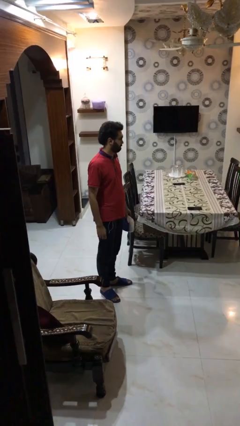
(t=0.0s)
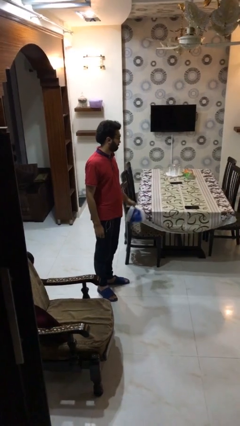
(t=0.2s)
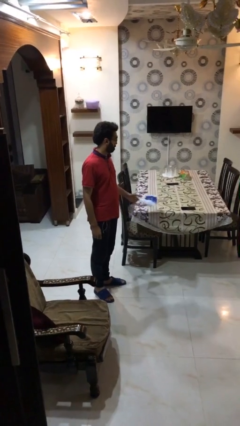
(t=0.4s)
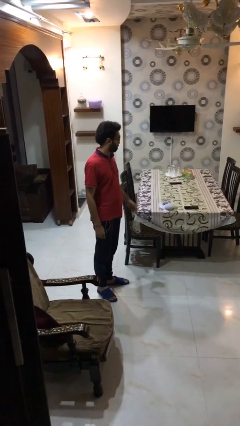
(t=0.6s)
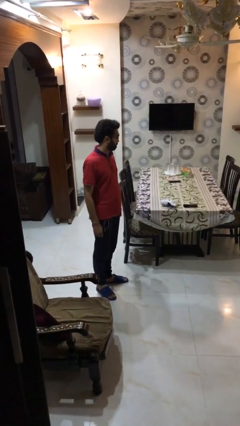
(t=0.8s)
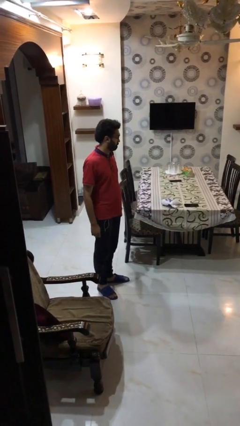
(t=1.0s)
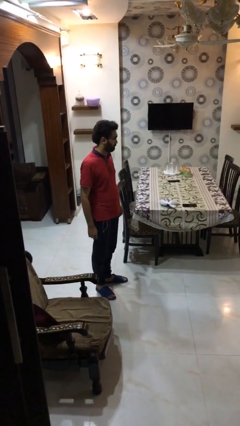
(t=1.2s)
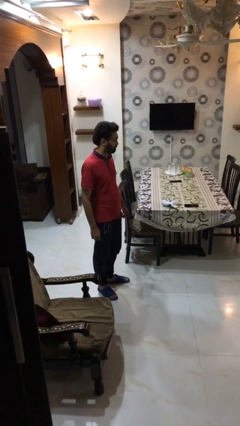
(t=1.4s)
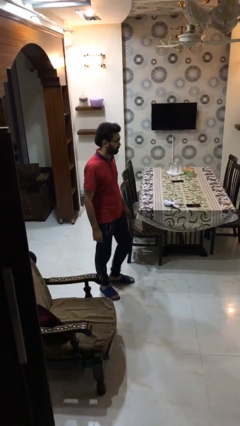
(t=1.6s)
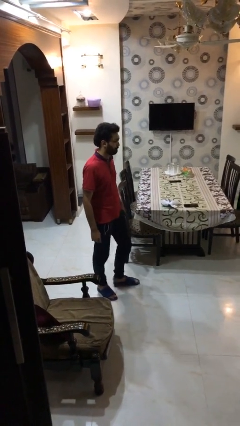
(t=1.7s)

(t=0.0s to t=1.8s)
person puts down object on table

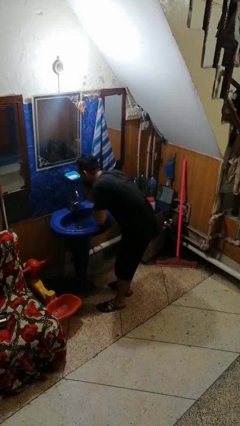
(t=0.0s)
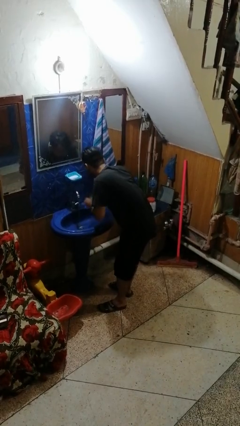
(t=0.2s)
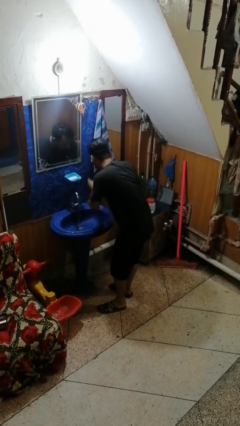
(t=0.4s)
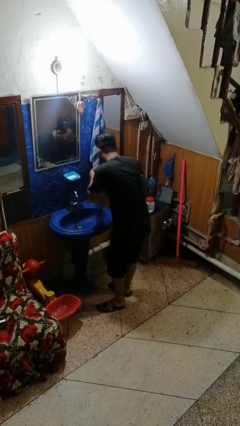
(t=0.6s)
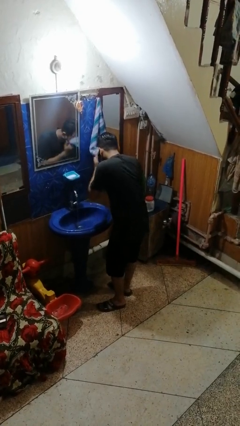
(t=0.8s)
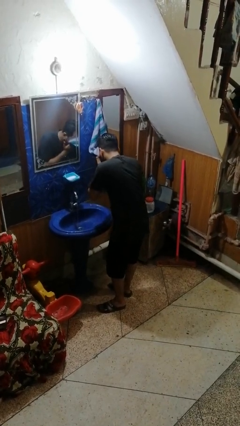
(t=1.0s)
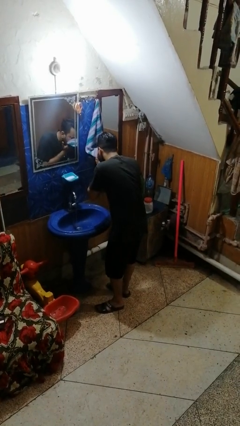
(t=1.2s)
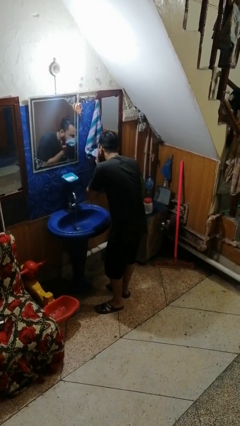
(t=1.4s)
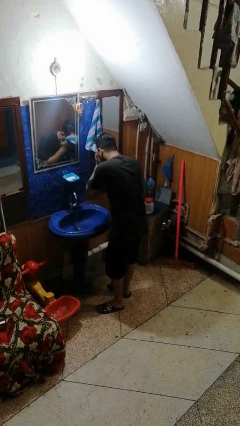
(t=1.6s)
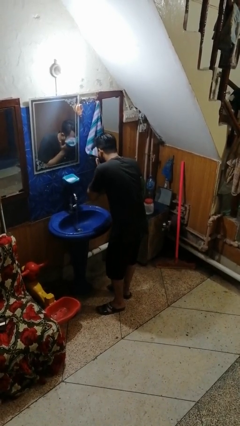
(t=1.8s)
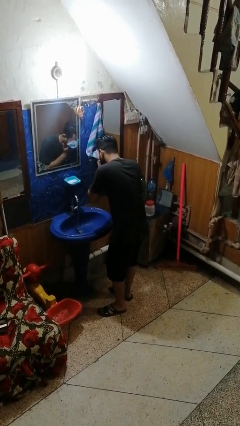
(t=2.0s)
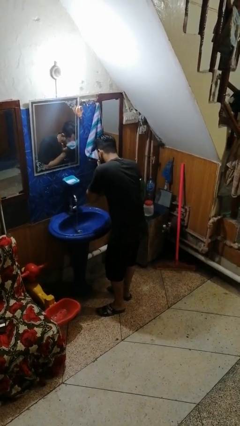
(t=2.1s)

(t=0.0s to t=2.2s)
person dries face with towel

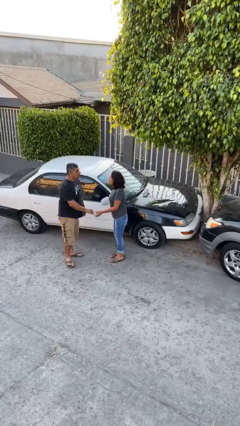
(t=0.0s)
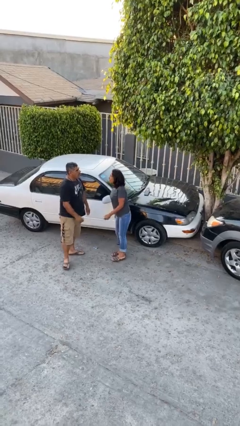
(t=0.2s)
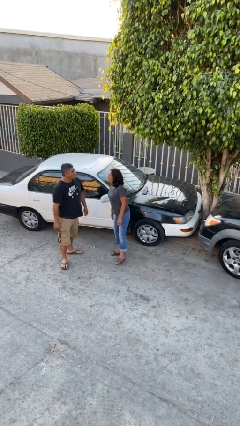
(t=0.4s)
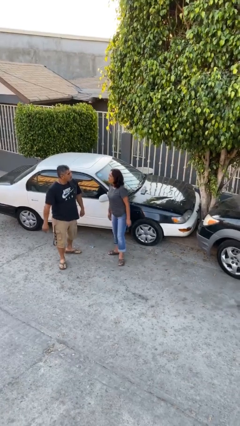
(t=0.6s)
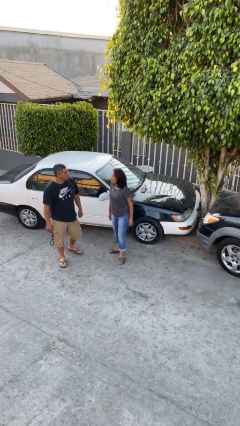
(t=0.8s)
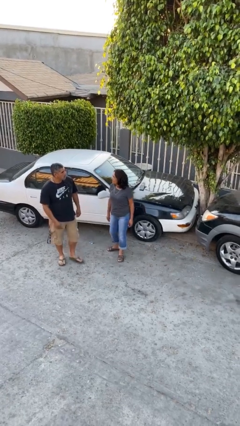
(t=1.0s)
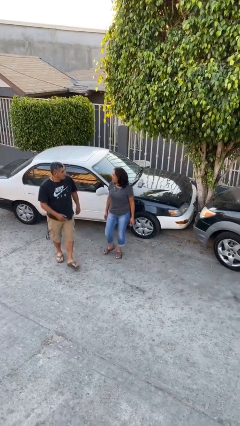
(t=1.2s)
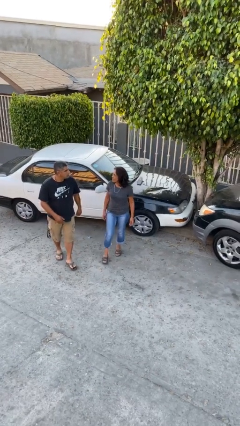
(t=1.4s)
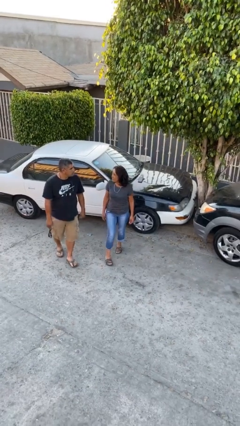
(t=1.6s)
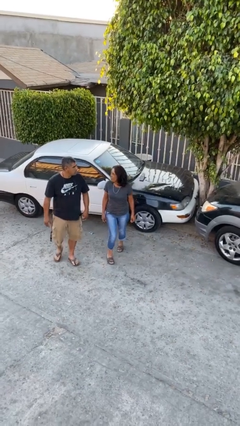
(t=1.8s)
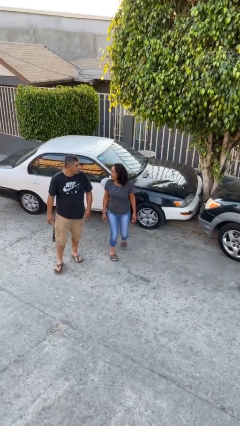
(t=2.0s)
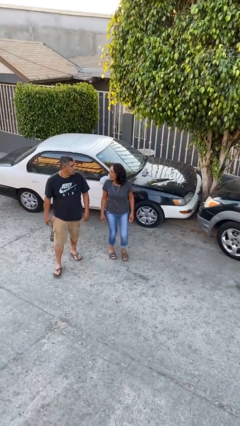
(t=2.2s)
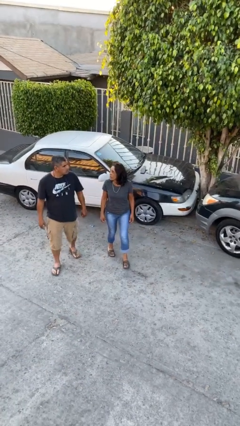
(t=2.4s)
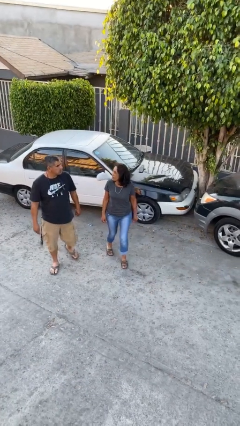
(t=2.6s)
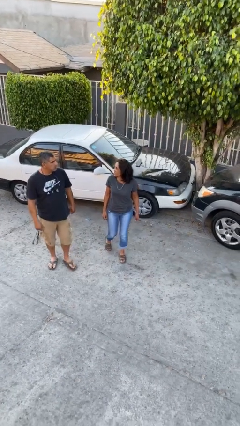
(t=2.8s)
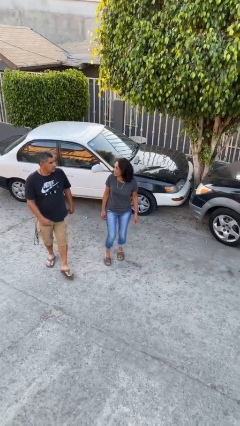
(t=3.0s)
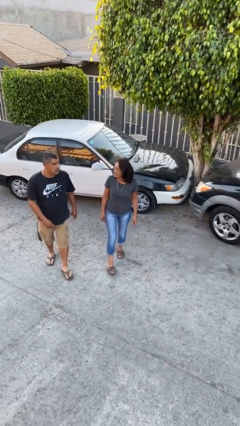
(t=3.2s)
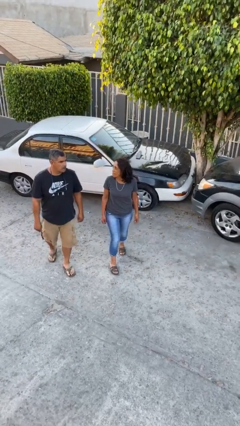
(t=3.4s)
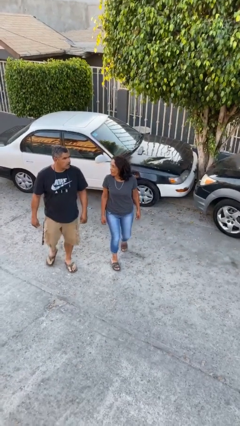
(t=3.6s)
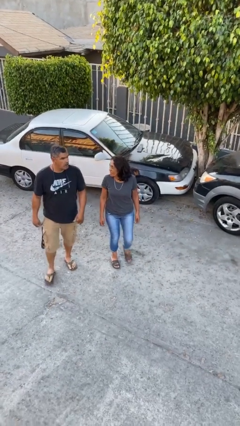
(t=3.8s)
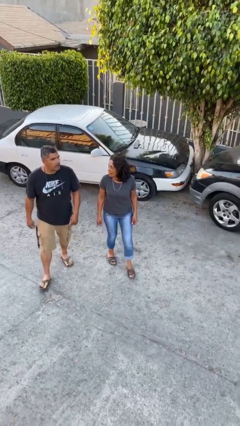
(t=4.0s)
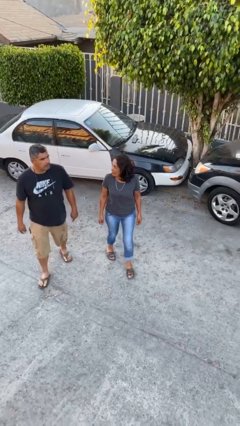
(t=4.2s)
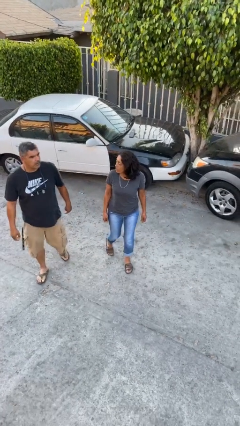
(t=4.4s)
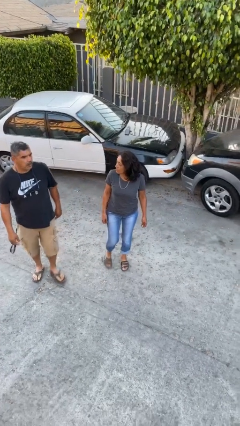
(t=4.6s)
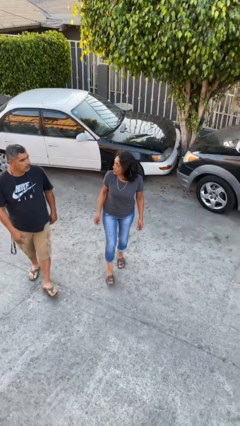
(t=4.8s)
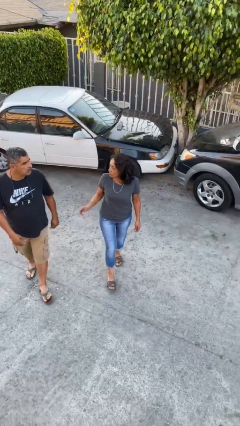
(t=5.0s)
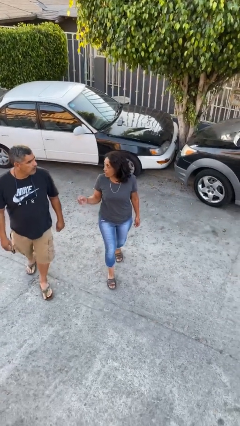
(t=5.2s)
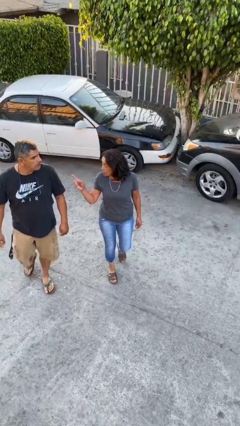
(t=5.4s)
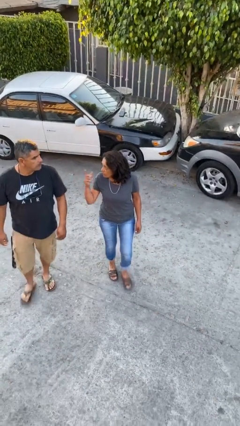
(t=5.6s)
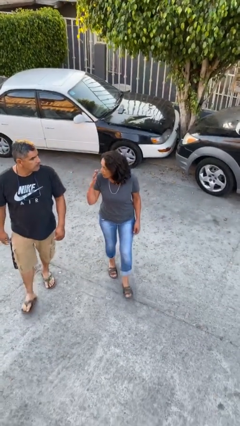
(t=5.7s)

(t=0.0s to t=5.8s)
person talks to person

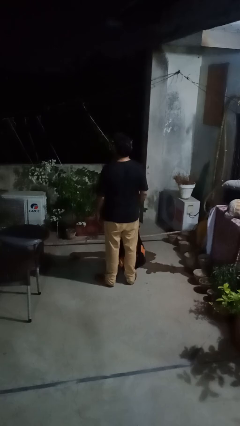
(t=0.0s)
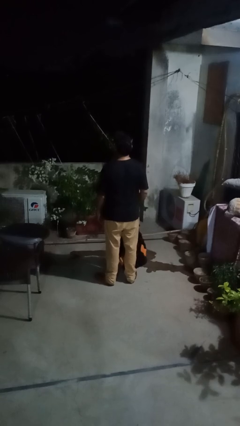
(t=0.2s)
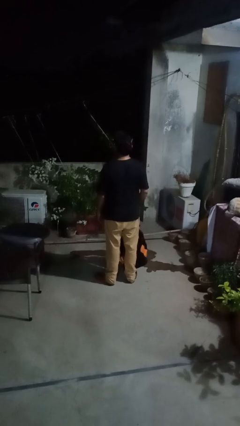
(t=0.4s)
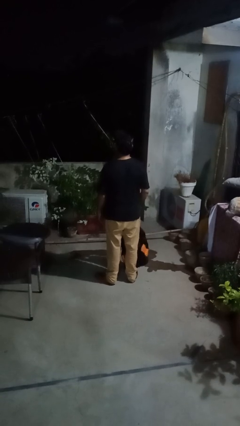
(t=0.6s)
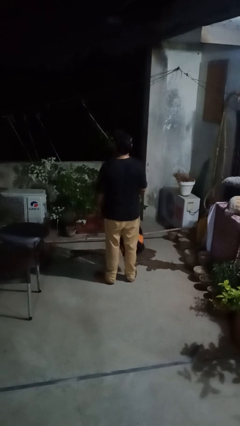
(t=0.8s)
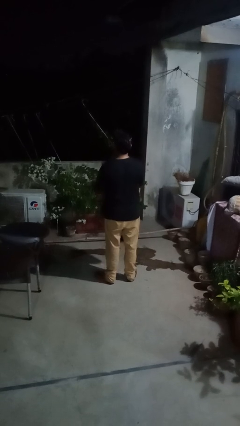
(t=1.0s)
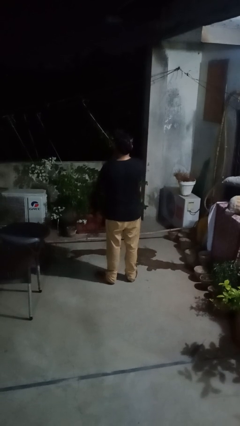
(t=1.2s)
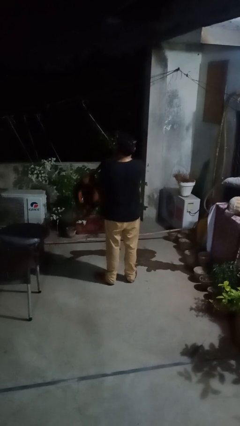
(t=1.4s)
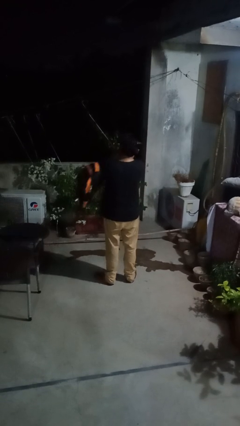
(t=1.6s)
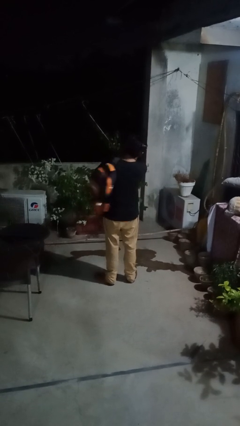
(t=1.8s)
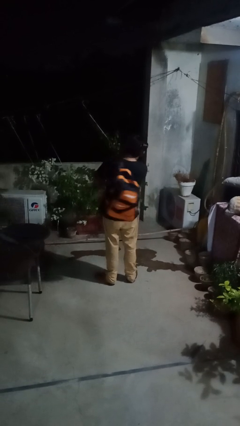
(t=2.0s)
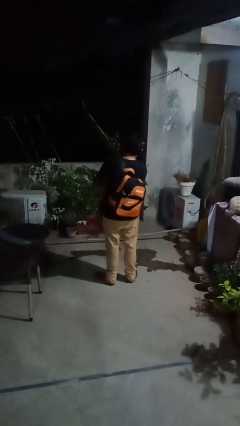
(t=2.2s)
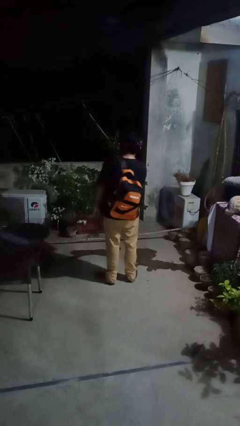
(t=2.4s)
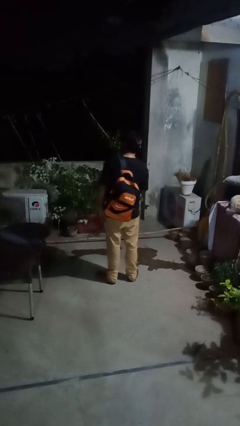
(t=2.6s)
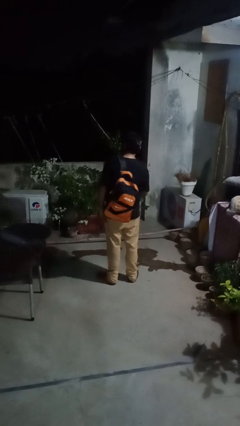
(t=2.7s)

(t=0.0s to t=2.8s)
person puts on backpack

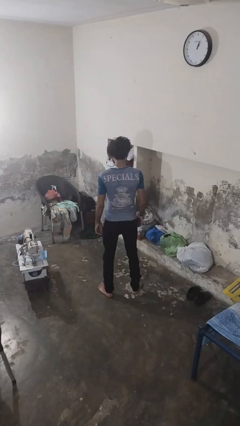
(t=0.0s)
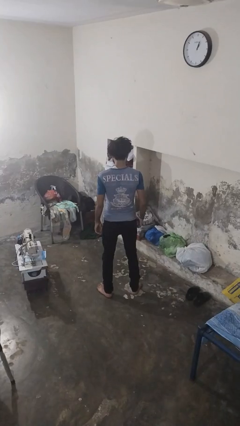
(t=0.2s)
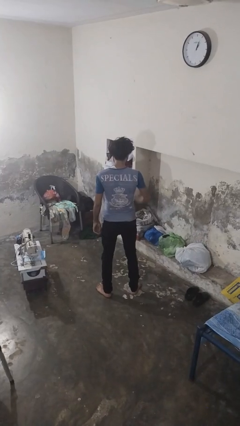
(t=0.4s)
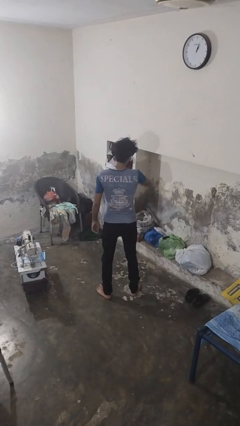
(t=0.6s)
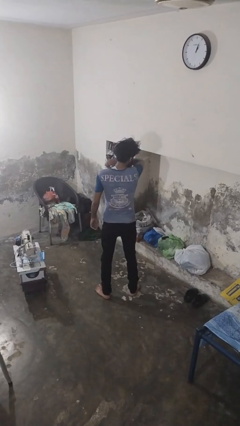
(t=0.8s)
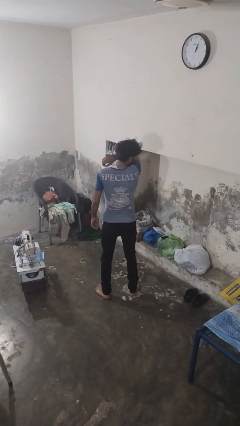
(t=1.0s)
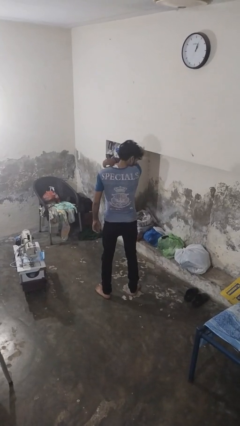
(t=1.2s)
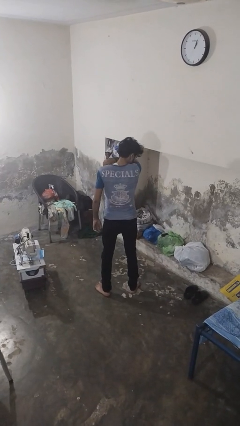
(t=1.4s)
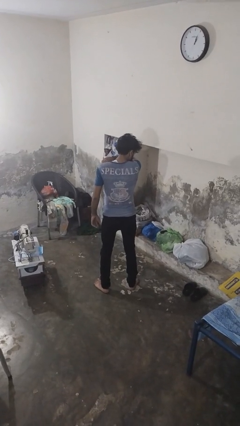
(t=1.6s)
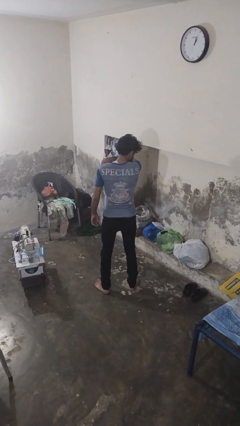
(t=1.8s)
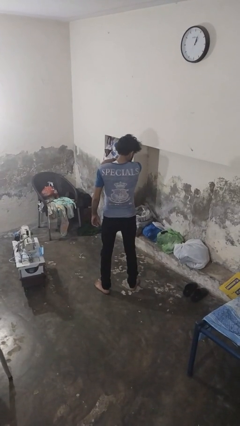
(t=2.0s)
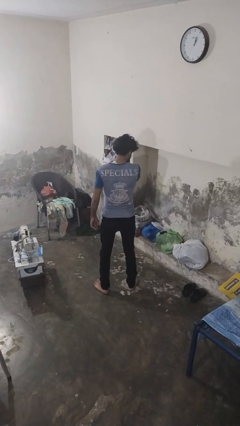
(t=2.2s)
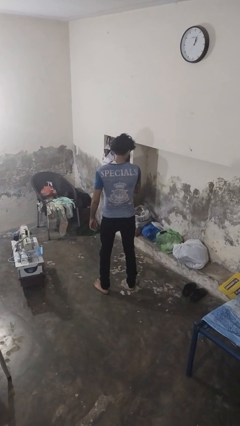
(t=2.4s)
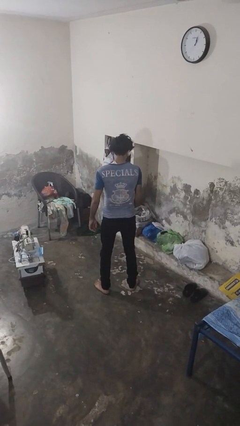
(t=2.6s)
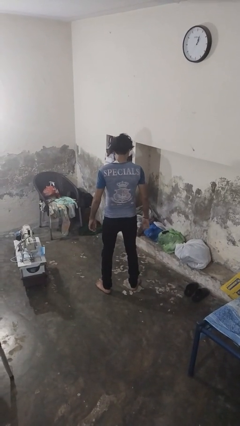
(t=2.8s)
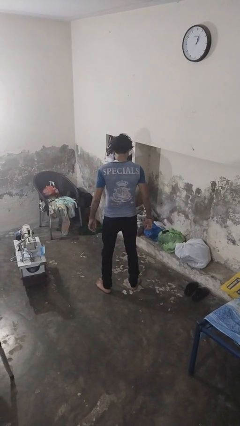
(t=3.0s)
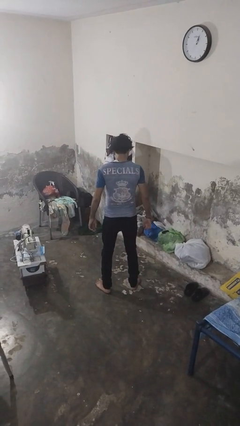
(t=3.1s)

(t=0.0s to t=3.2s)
person sneezes into arm

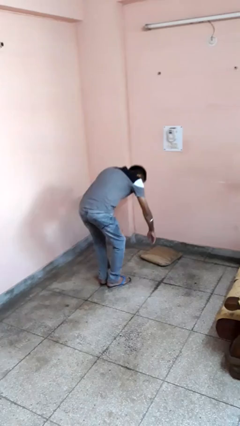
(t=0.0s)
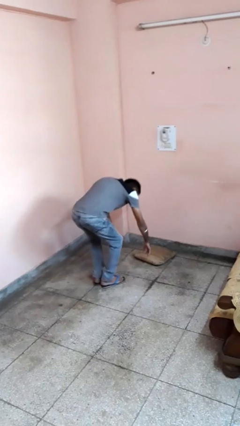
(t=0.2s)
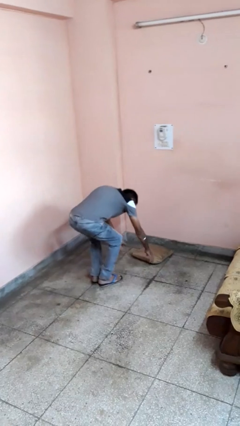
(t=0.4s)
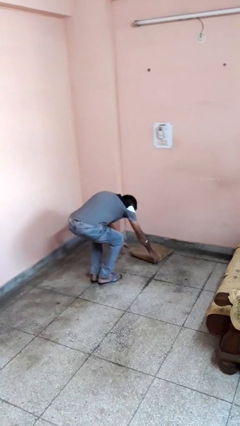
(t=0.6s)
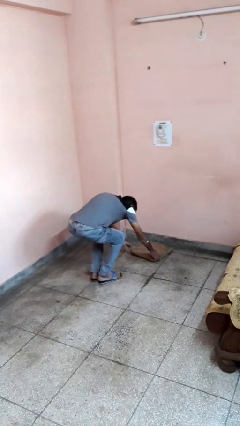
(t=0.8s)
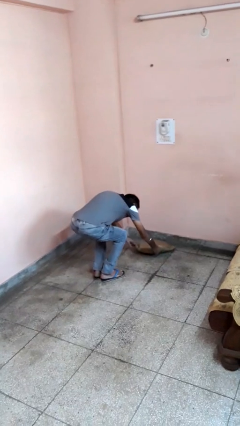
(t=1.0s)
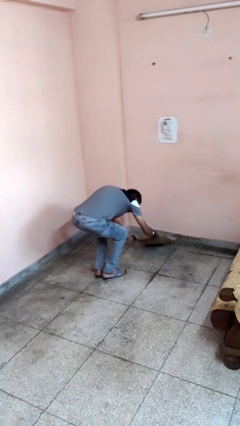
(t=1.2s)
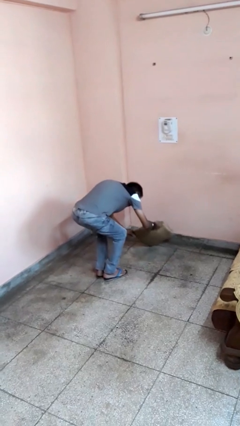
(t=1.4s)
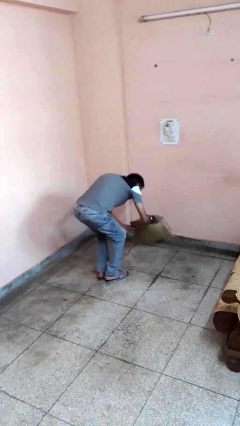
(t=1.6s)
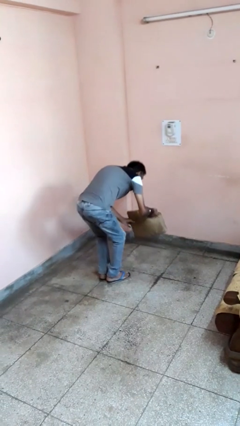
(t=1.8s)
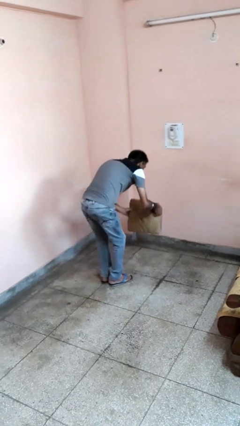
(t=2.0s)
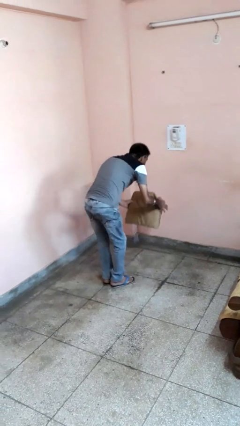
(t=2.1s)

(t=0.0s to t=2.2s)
person picks up object from floor
